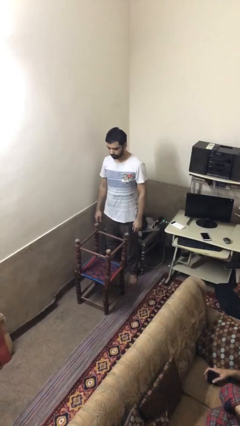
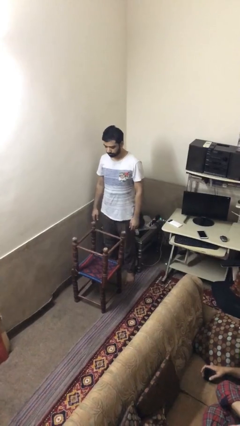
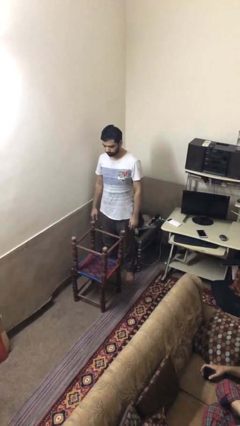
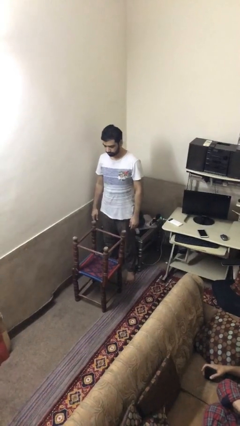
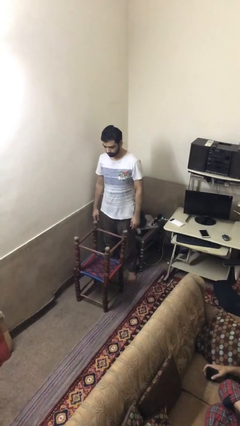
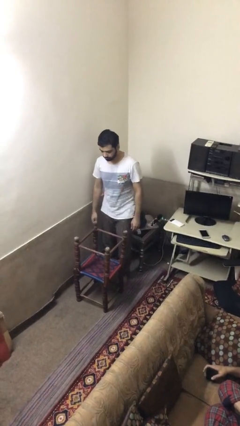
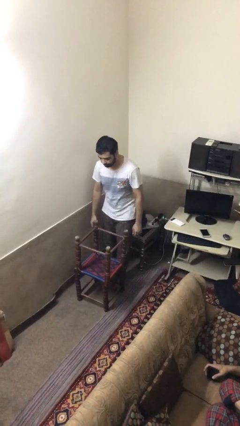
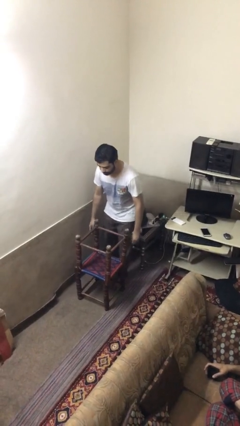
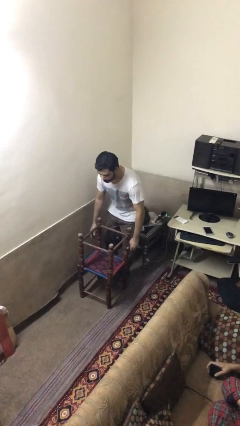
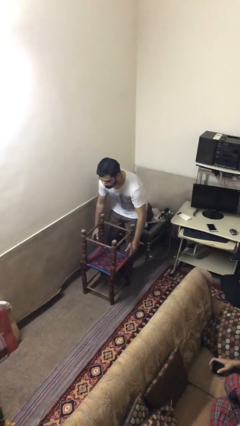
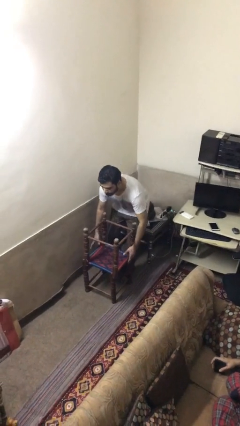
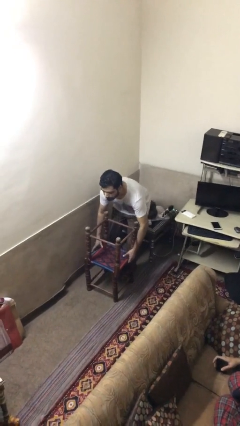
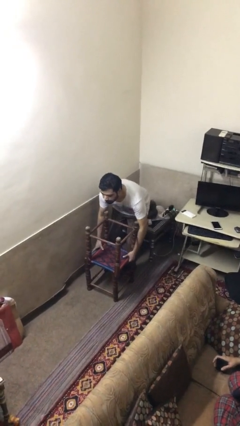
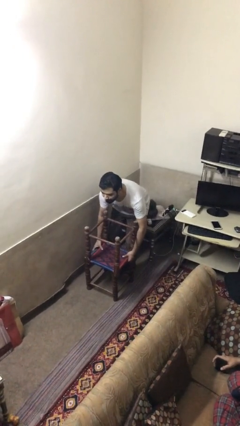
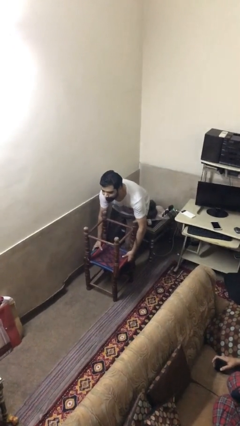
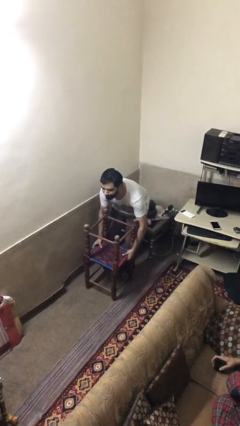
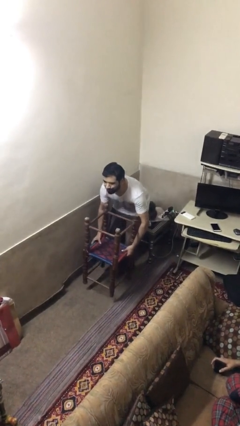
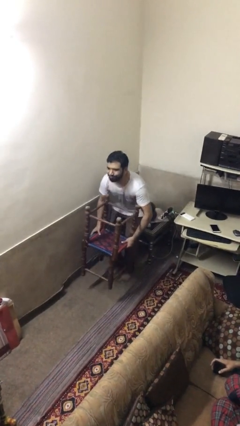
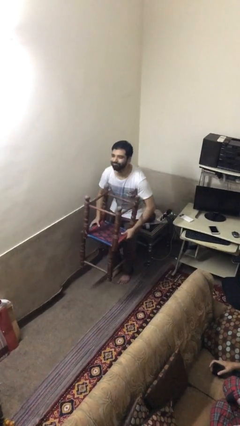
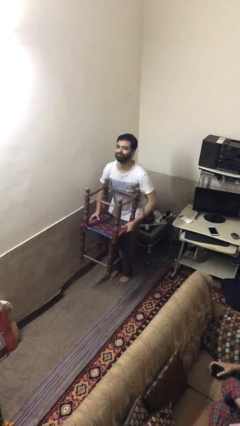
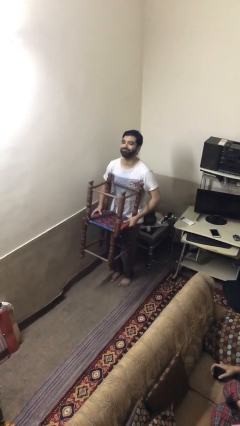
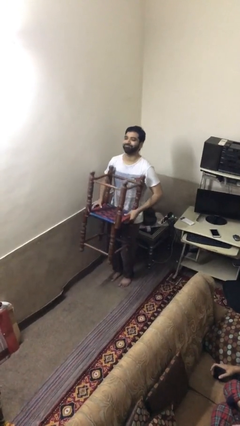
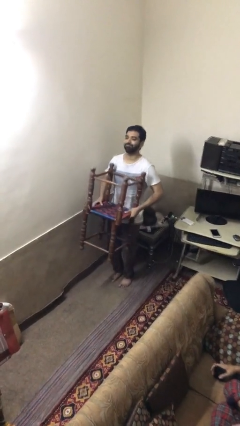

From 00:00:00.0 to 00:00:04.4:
person picks up object from floor

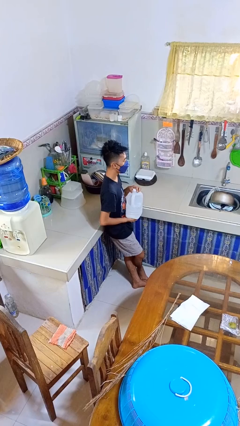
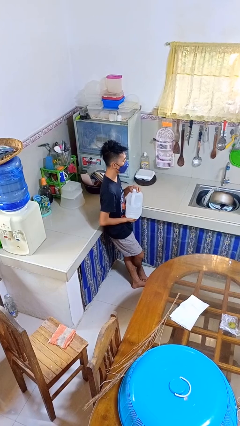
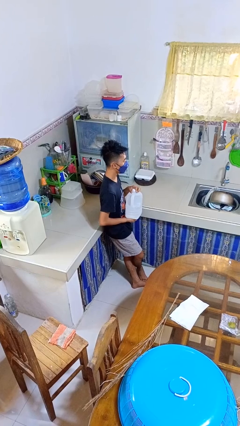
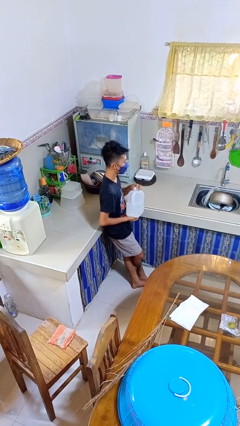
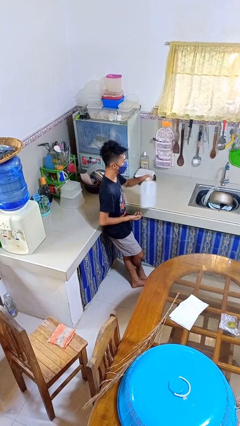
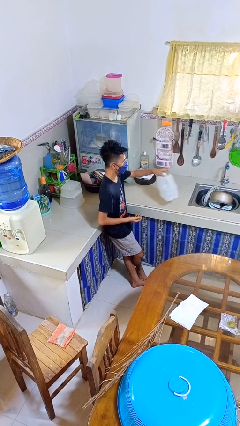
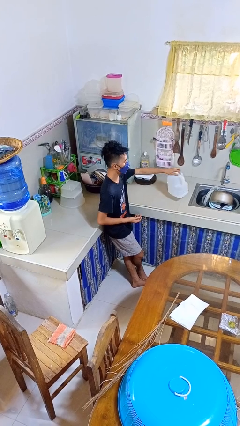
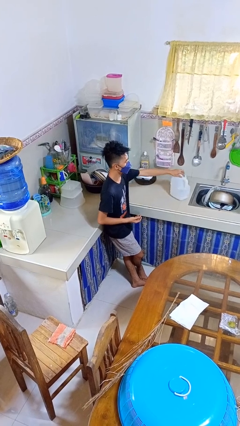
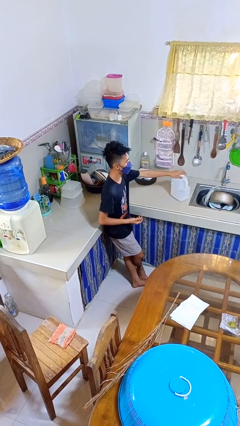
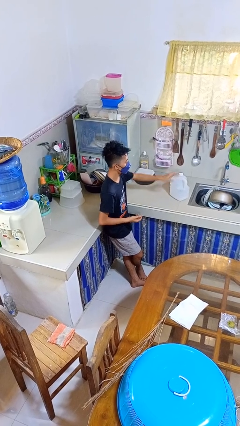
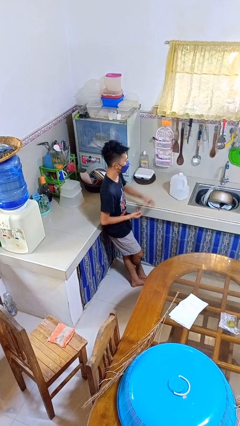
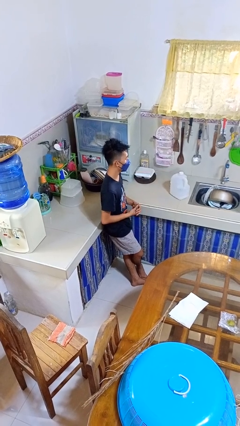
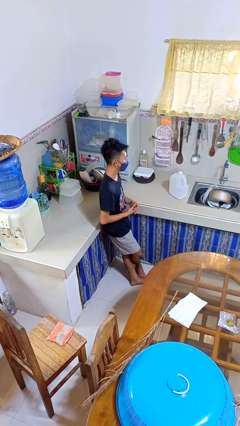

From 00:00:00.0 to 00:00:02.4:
person puts down object on countertop

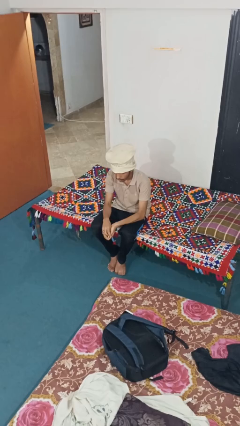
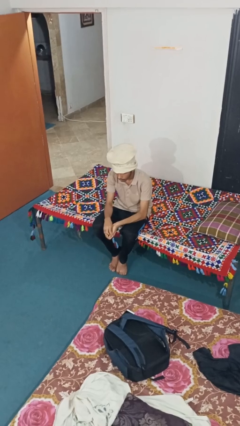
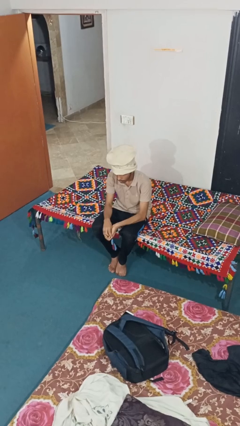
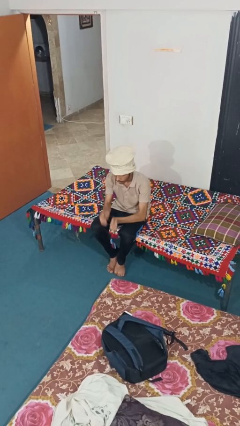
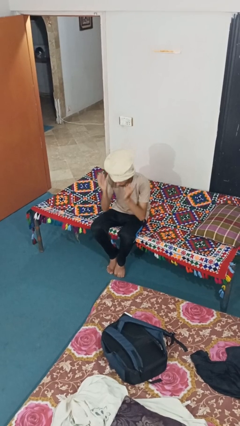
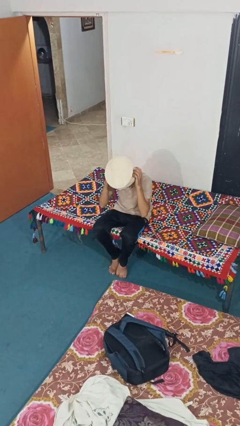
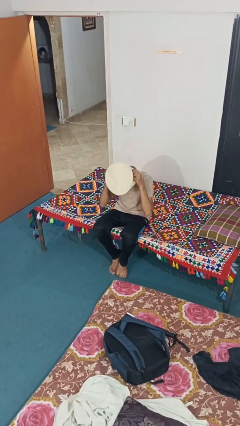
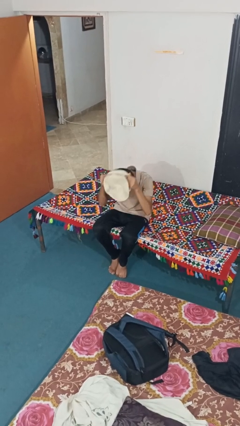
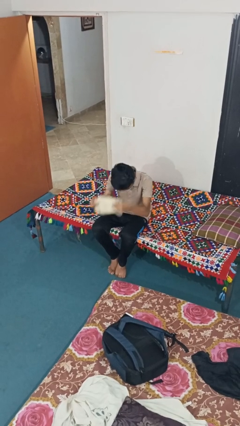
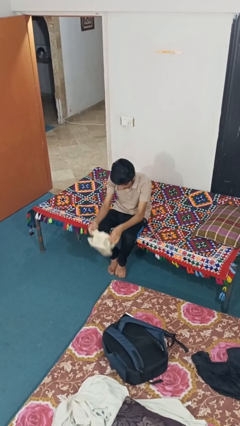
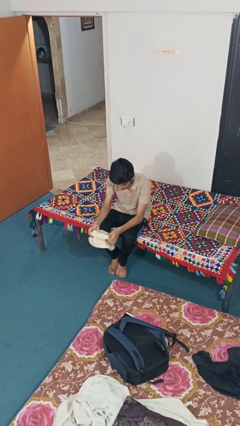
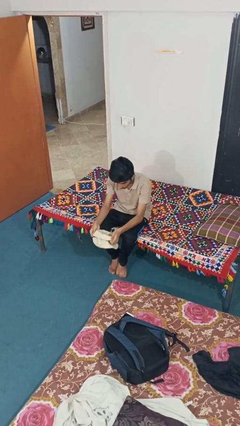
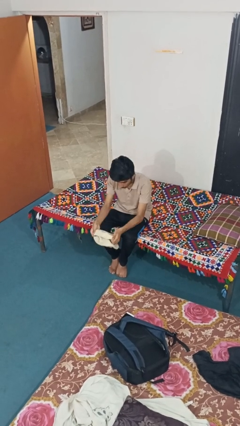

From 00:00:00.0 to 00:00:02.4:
person takes off hat

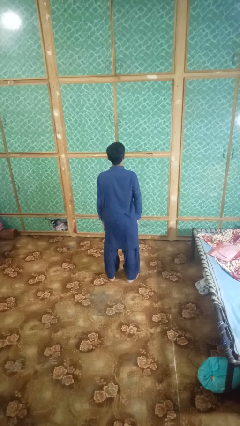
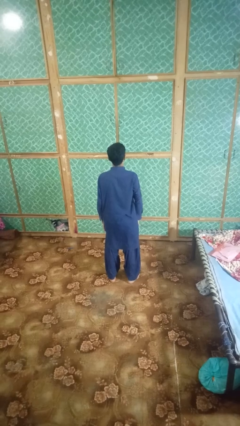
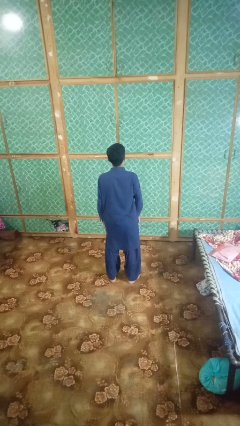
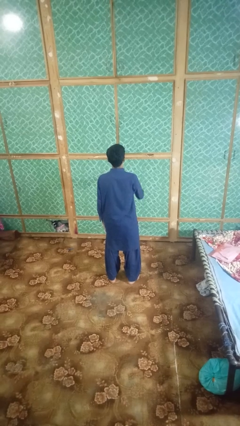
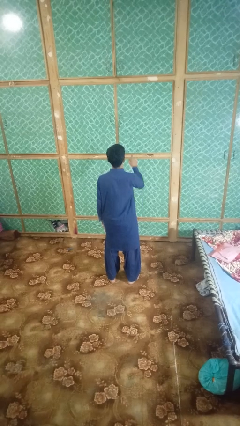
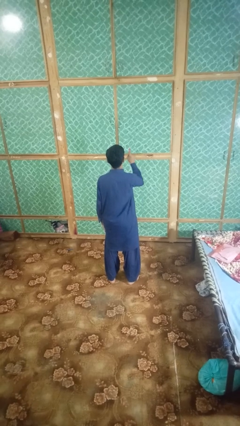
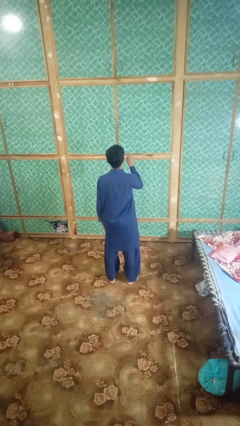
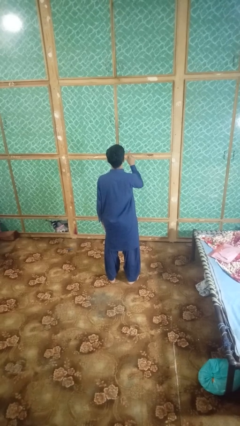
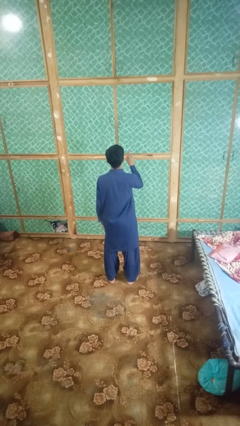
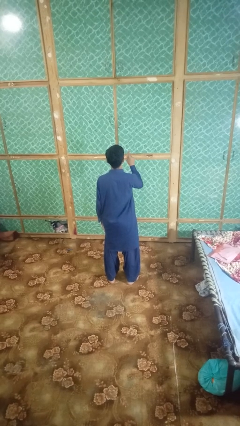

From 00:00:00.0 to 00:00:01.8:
person gestures number one

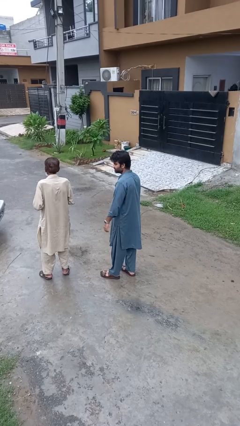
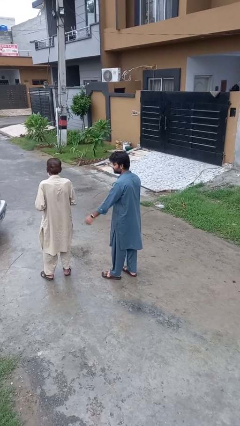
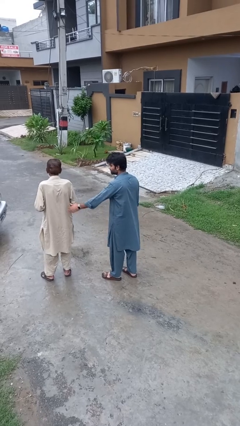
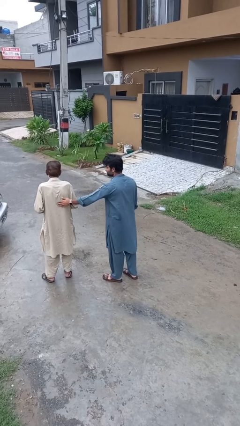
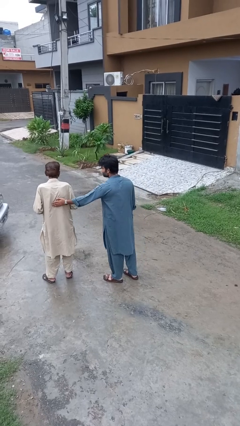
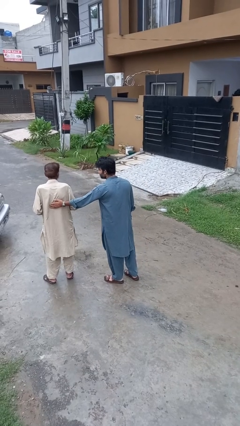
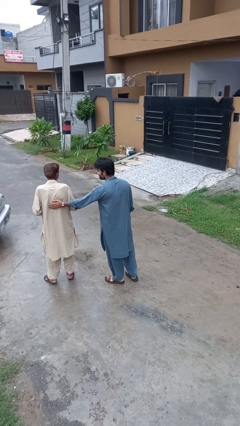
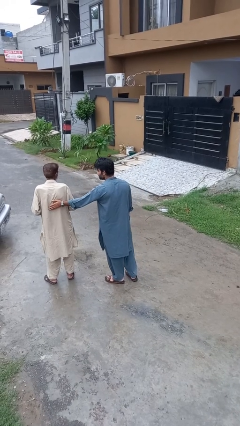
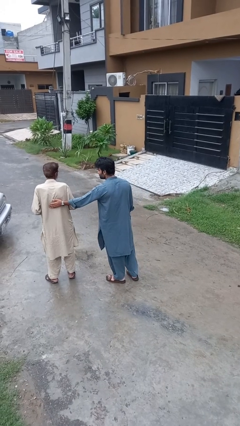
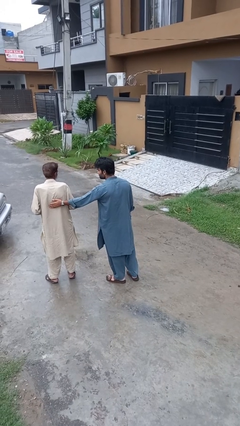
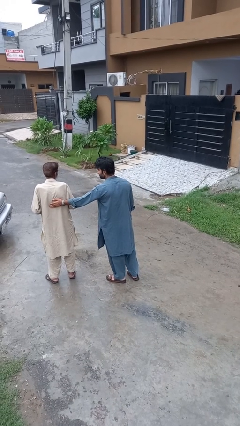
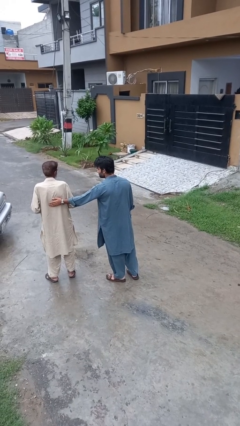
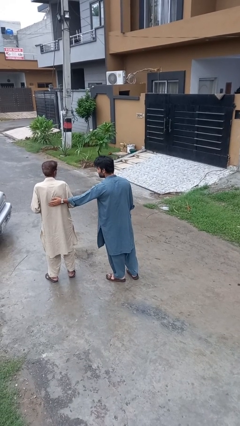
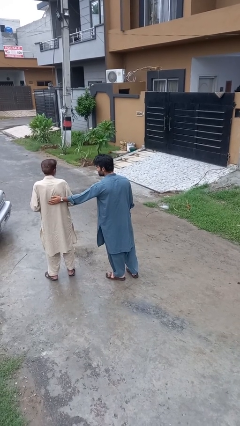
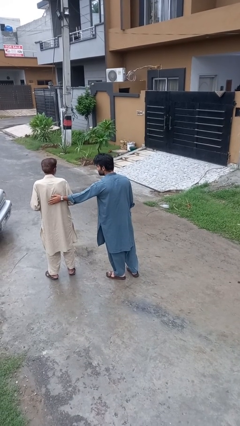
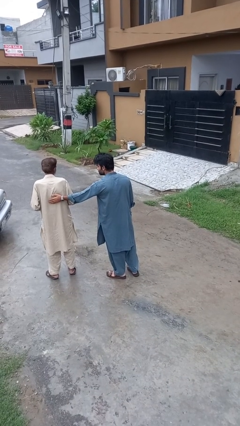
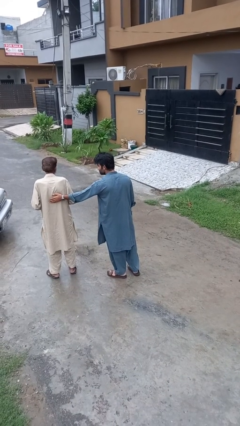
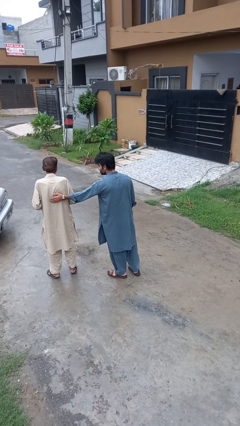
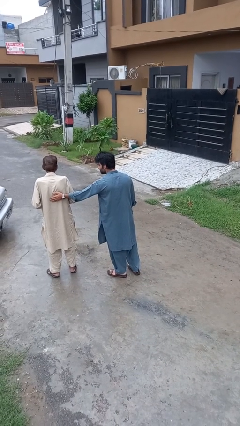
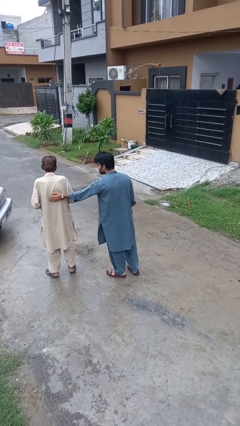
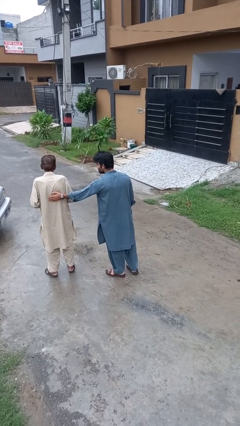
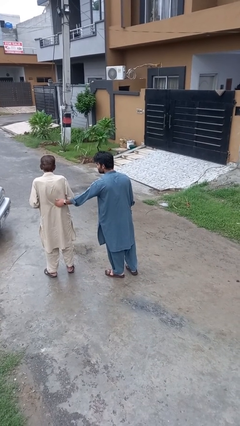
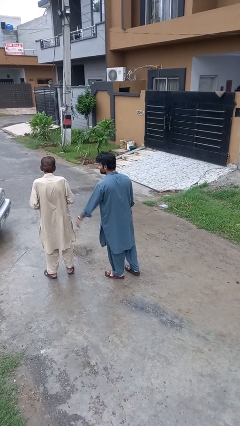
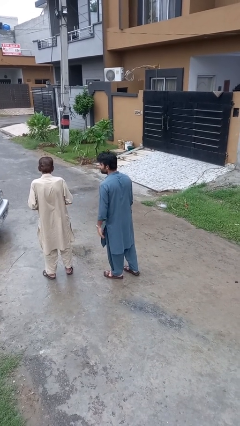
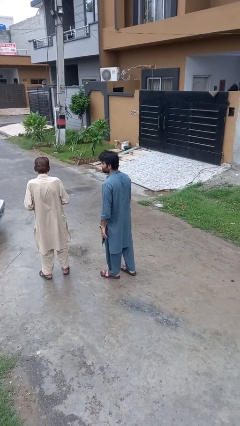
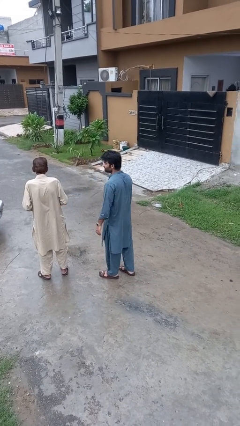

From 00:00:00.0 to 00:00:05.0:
person touches back of person

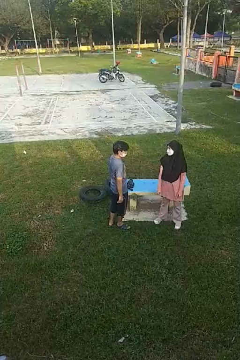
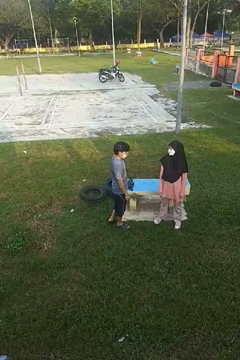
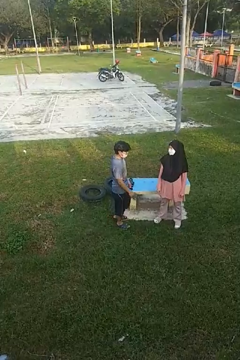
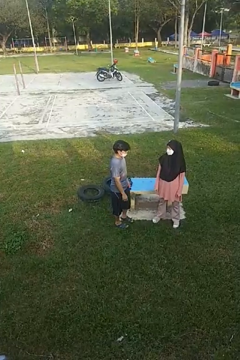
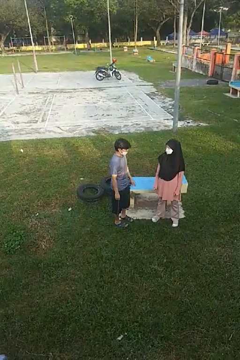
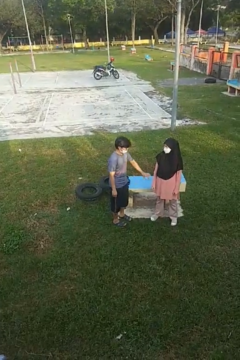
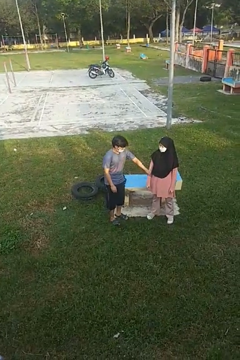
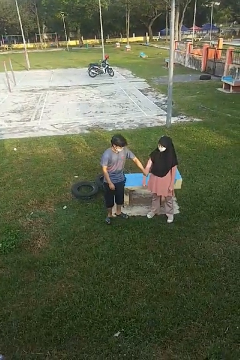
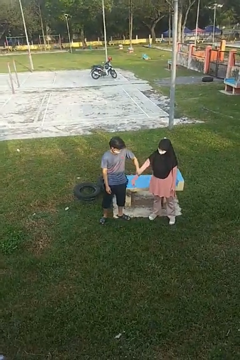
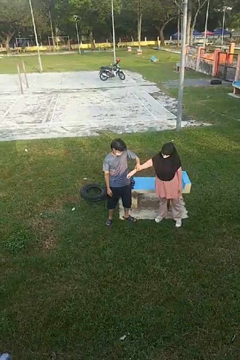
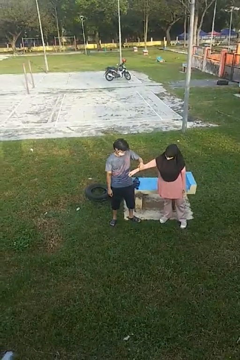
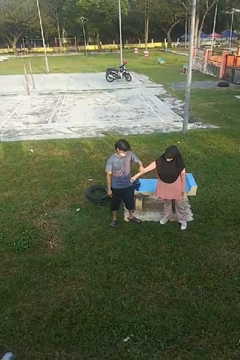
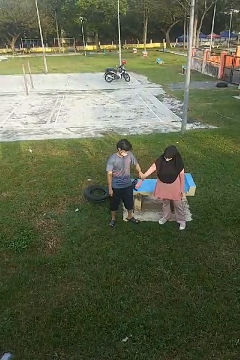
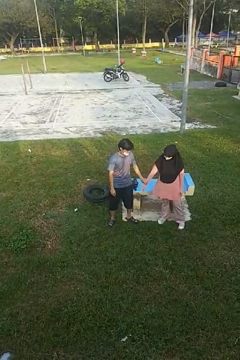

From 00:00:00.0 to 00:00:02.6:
person grabs person by forearm
